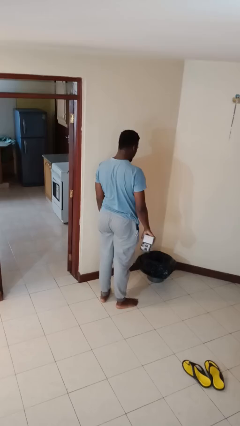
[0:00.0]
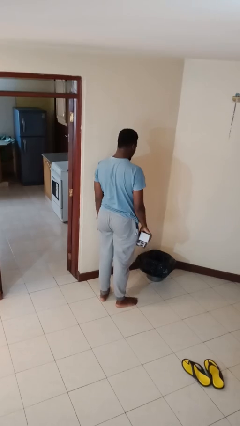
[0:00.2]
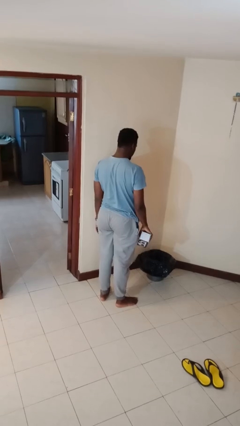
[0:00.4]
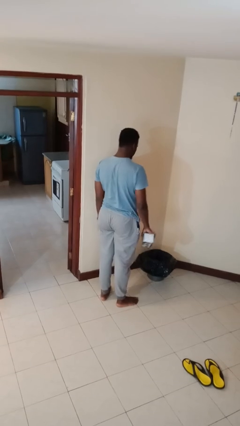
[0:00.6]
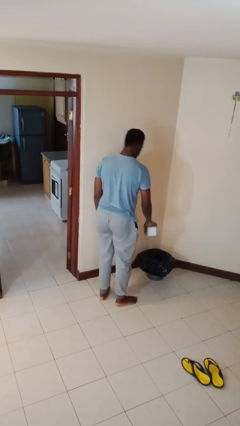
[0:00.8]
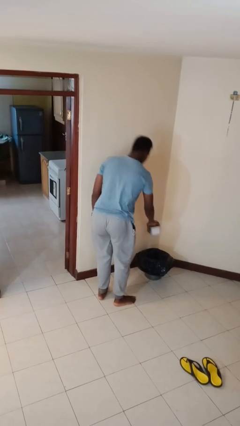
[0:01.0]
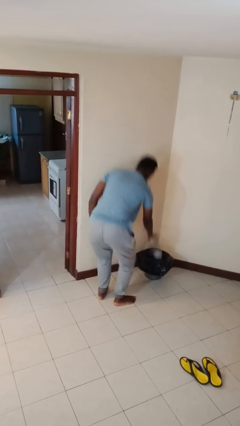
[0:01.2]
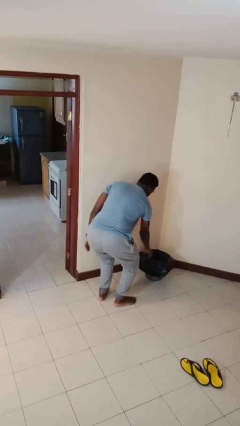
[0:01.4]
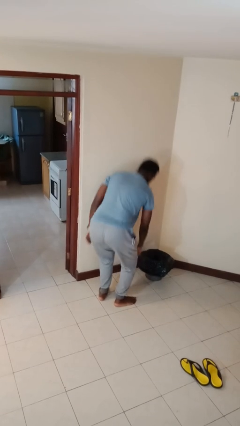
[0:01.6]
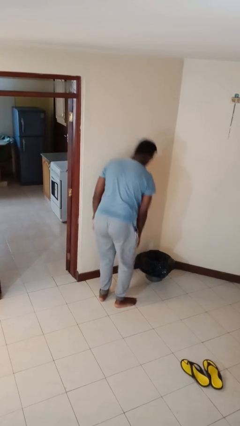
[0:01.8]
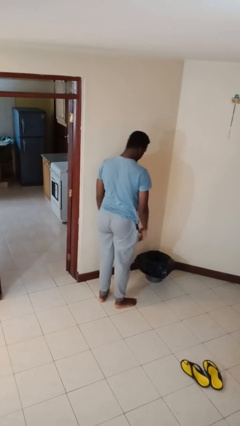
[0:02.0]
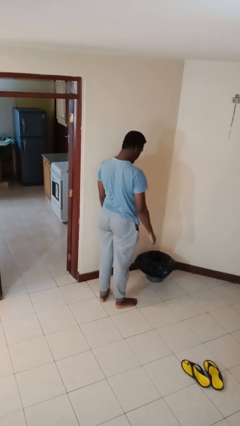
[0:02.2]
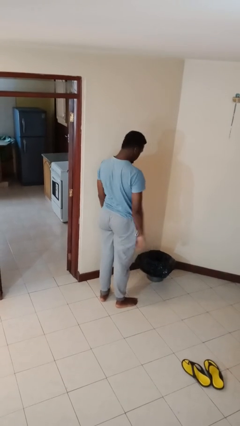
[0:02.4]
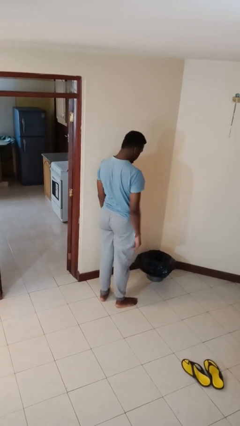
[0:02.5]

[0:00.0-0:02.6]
person discards trash

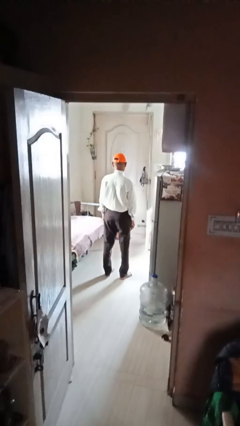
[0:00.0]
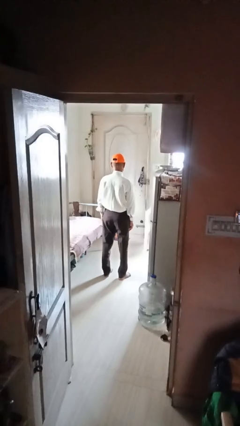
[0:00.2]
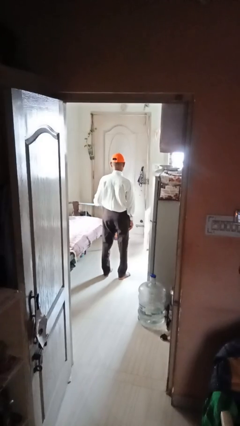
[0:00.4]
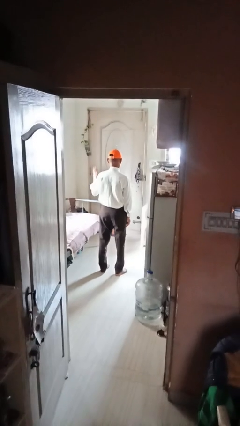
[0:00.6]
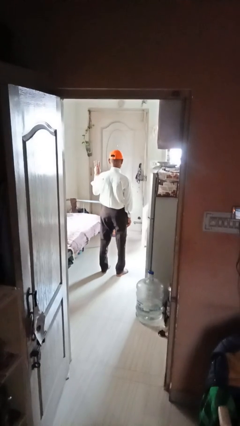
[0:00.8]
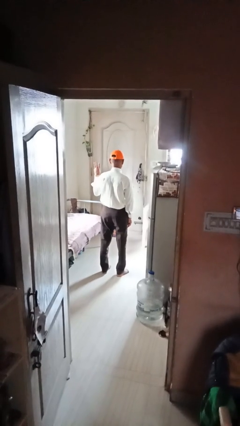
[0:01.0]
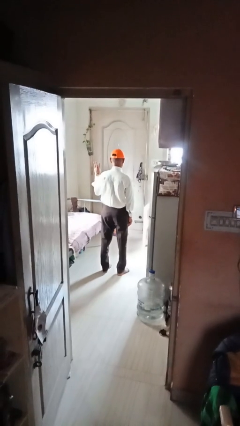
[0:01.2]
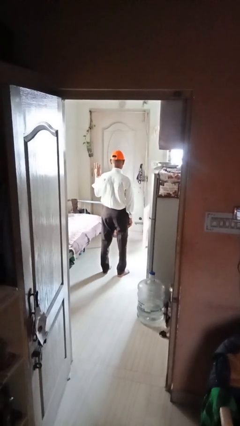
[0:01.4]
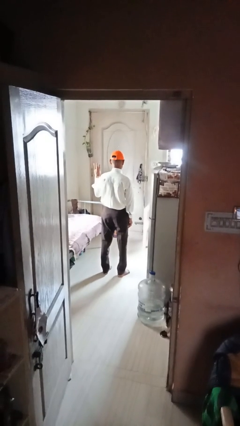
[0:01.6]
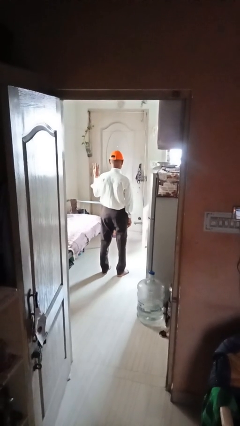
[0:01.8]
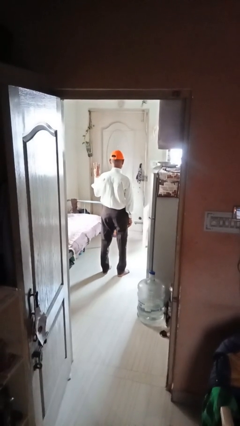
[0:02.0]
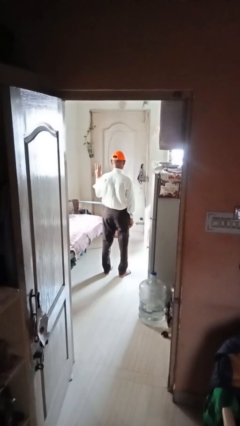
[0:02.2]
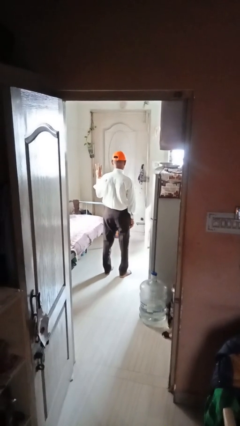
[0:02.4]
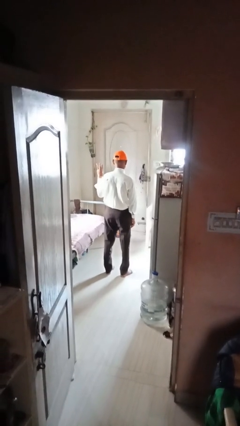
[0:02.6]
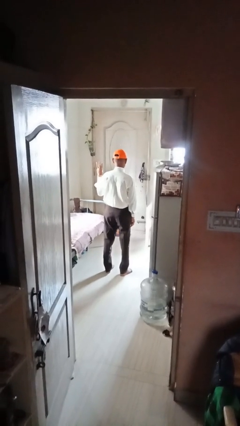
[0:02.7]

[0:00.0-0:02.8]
person gestures number three

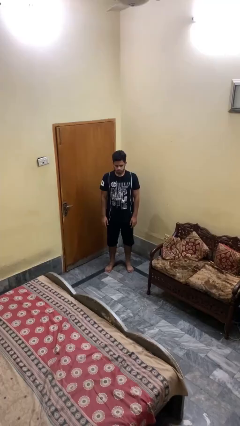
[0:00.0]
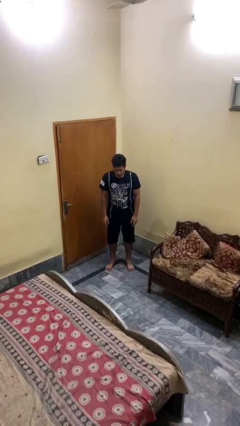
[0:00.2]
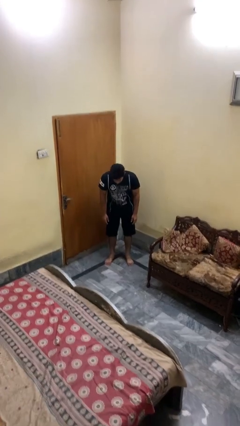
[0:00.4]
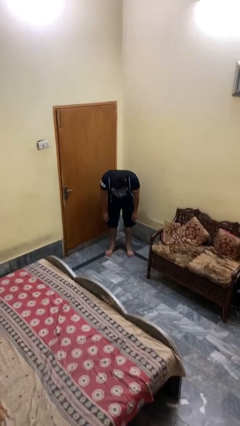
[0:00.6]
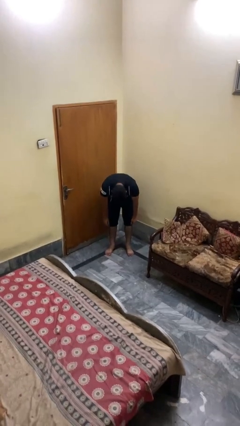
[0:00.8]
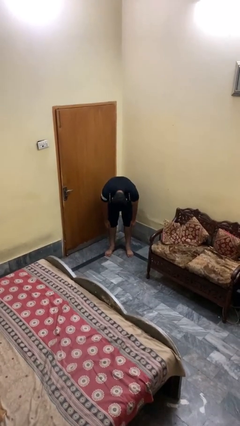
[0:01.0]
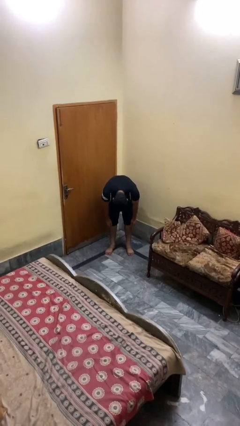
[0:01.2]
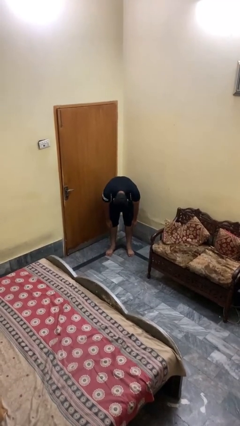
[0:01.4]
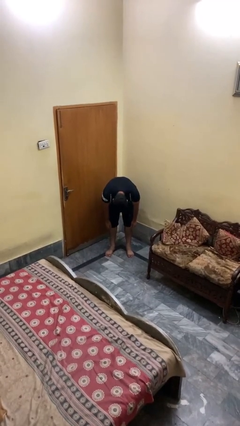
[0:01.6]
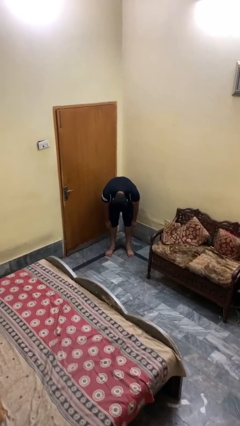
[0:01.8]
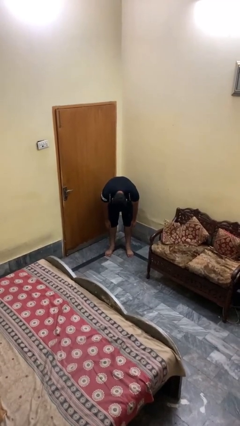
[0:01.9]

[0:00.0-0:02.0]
person bows

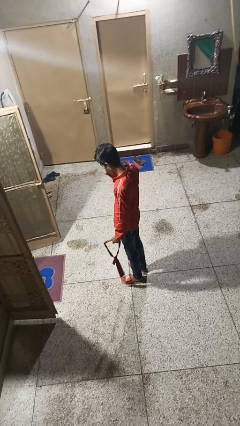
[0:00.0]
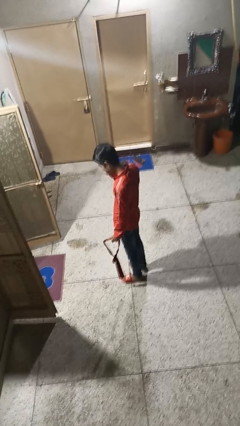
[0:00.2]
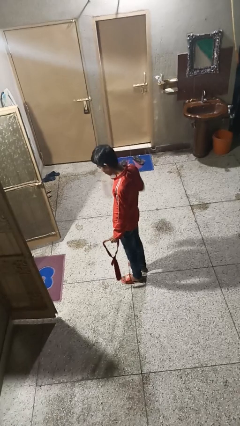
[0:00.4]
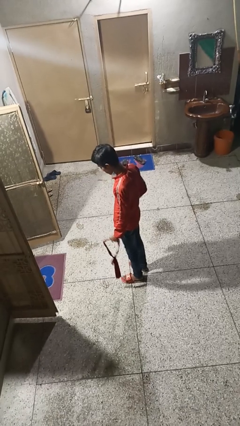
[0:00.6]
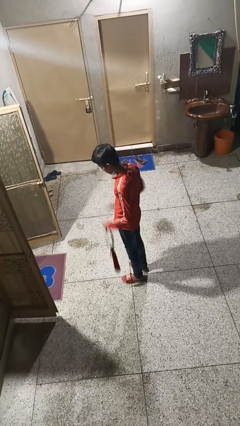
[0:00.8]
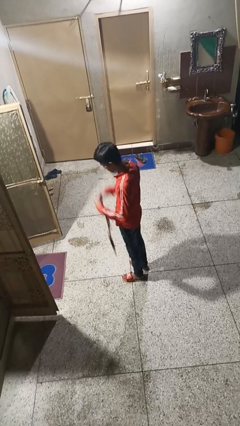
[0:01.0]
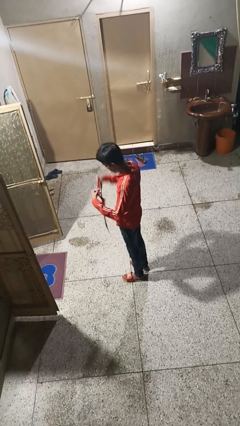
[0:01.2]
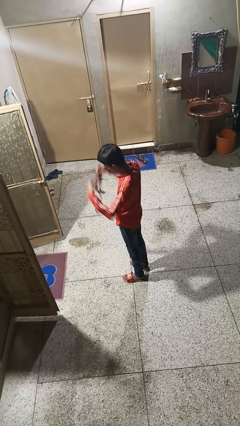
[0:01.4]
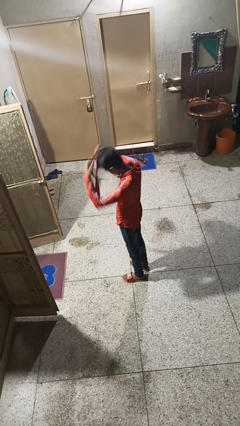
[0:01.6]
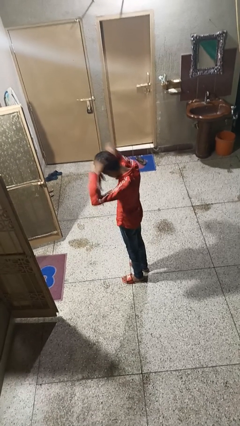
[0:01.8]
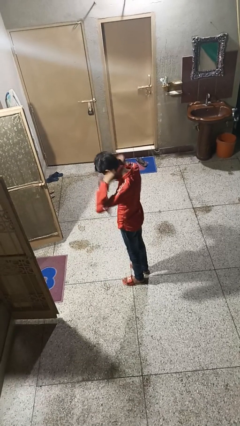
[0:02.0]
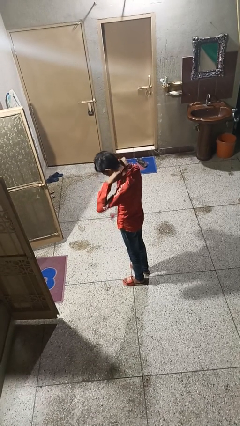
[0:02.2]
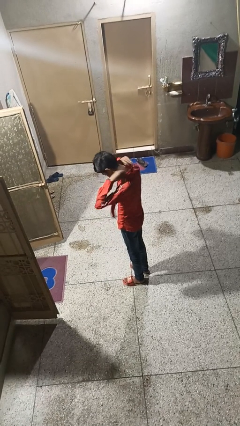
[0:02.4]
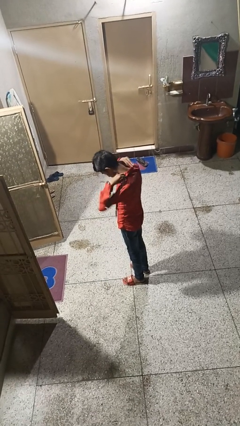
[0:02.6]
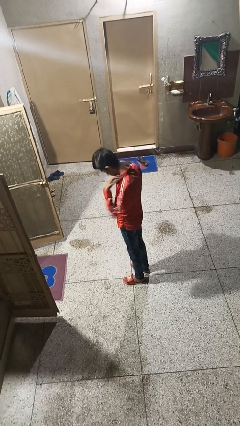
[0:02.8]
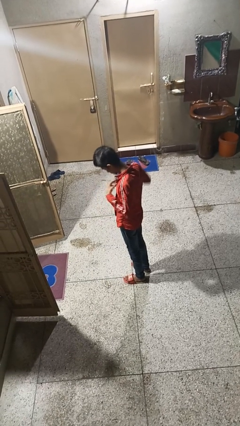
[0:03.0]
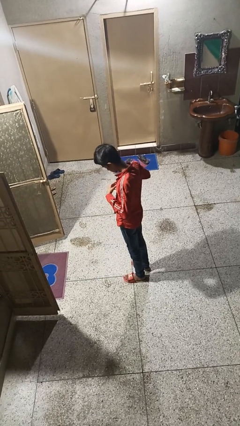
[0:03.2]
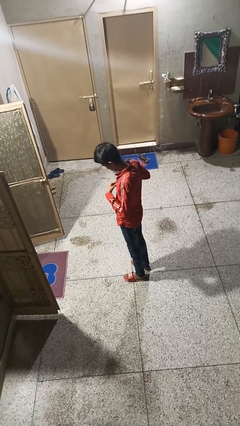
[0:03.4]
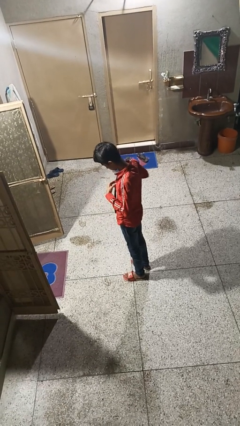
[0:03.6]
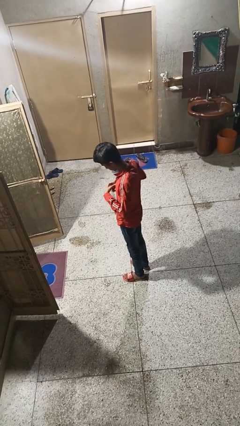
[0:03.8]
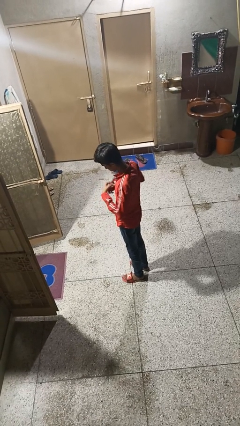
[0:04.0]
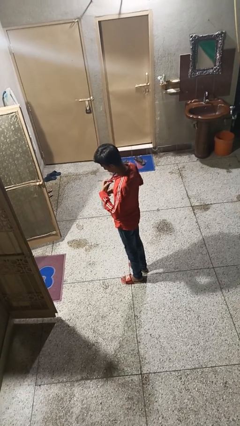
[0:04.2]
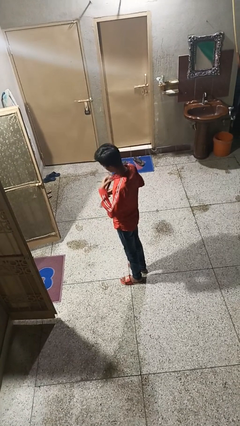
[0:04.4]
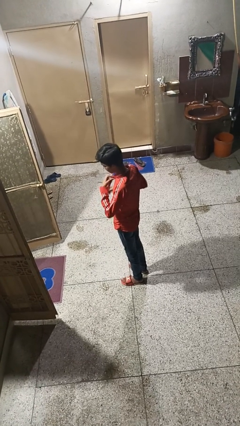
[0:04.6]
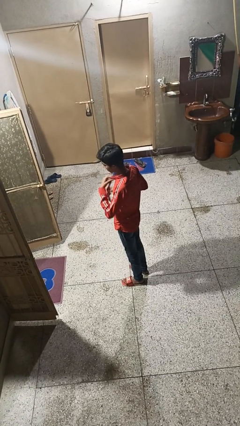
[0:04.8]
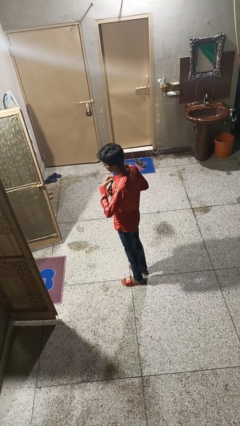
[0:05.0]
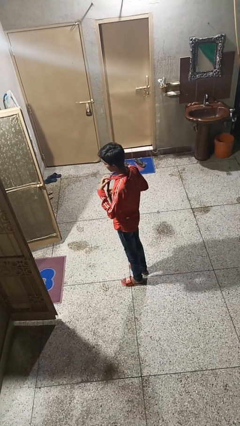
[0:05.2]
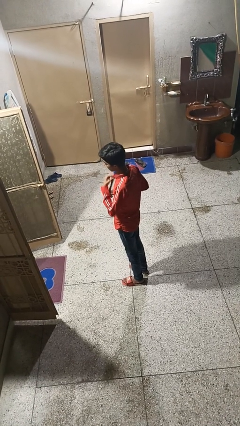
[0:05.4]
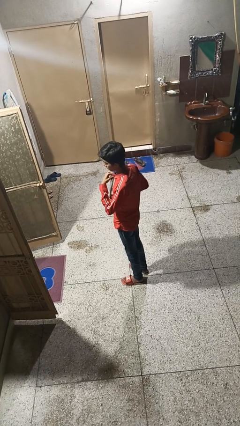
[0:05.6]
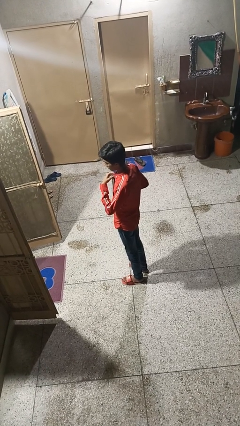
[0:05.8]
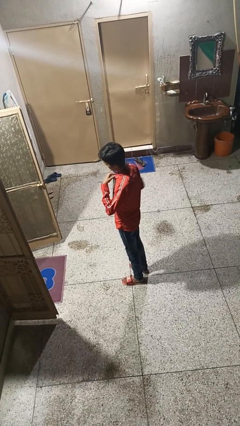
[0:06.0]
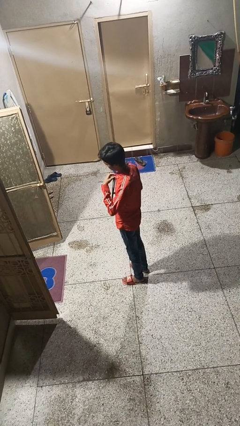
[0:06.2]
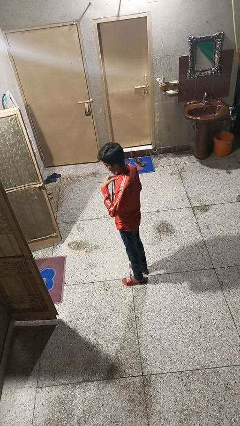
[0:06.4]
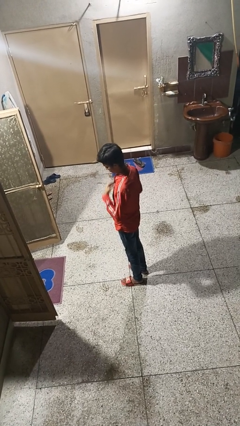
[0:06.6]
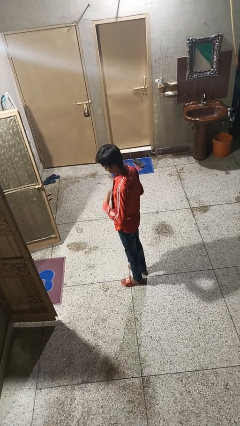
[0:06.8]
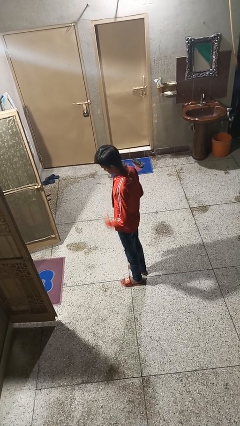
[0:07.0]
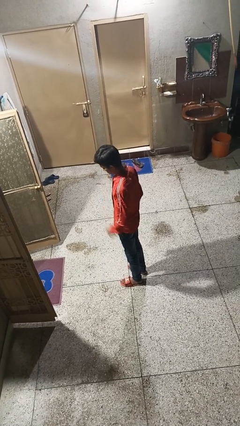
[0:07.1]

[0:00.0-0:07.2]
person puts on necktie

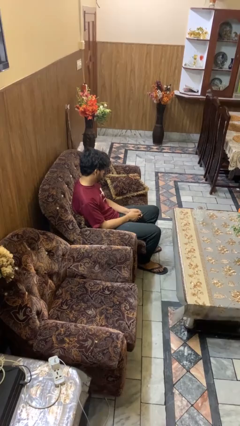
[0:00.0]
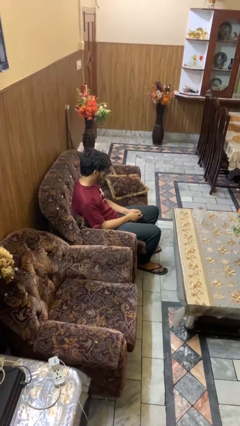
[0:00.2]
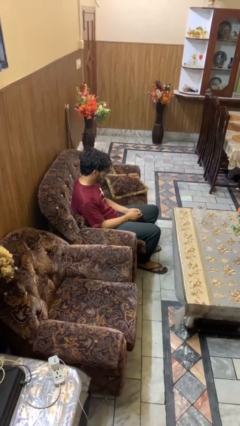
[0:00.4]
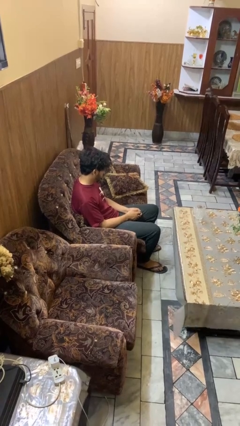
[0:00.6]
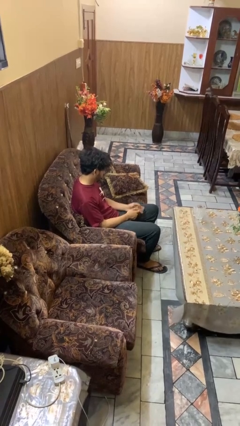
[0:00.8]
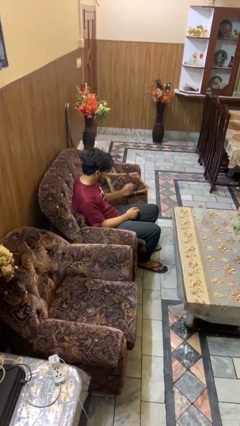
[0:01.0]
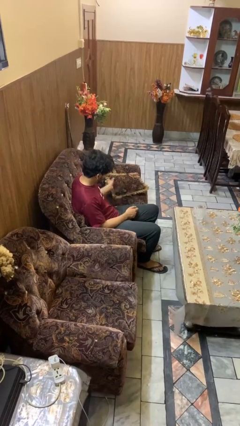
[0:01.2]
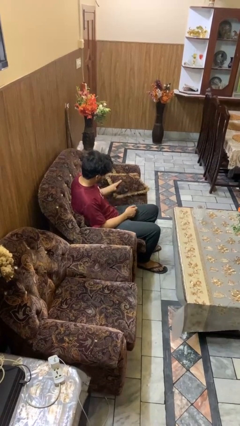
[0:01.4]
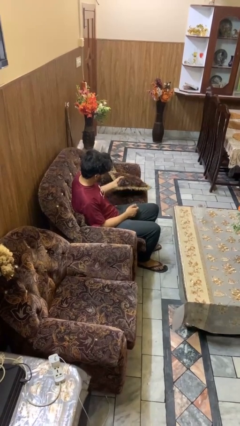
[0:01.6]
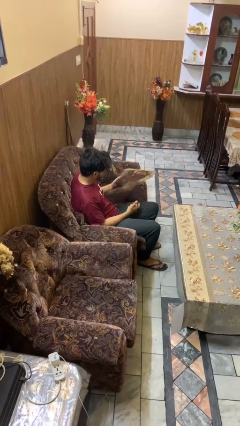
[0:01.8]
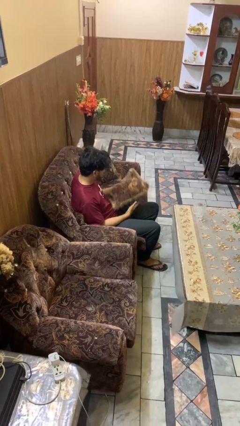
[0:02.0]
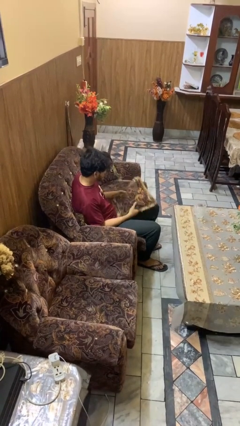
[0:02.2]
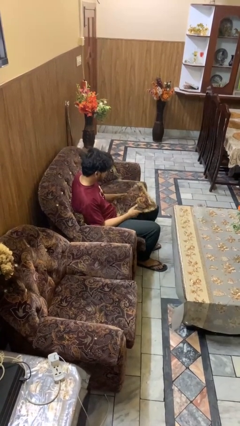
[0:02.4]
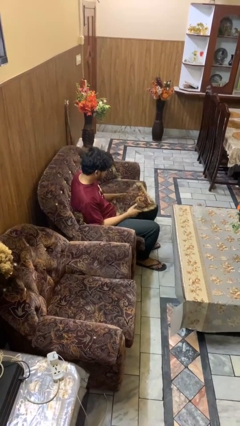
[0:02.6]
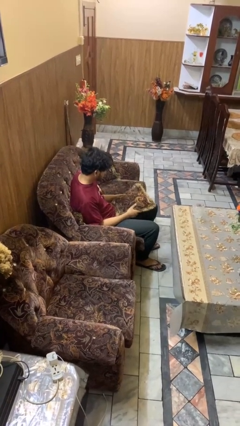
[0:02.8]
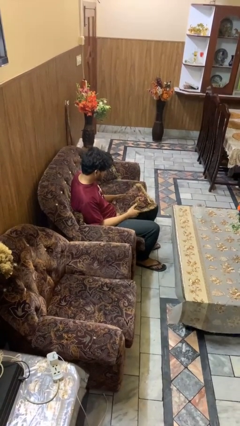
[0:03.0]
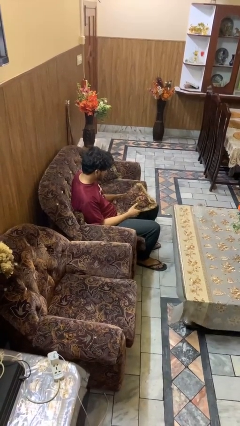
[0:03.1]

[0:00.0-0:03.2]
person picks up object from couch
